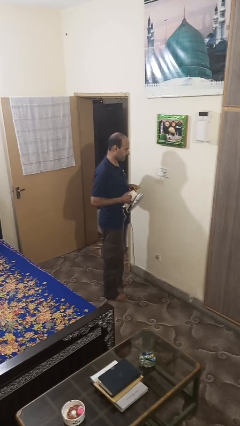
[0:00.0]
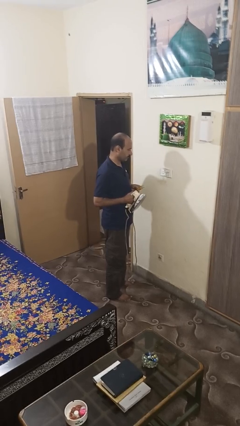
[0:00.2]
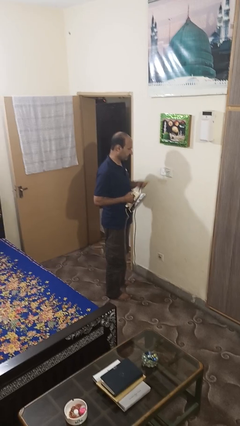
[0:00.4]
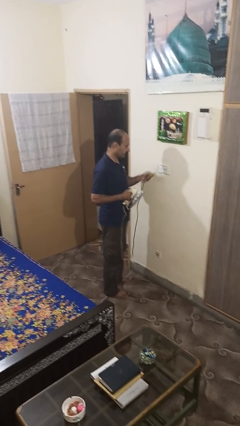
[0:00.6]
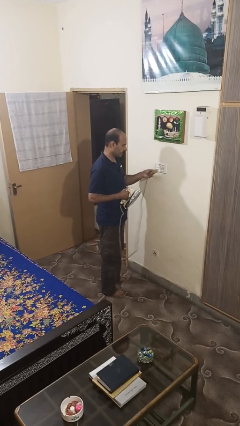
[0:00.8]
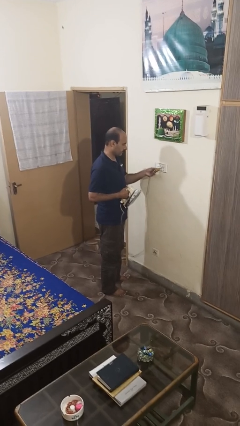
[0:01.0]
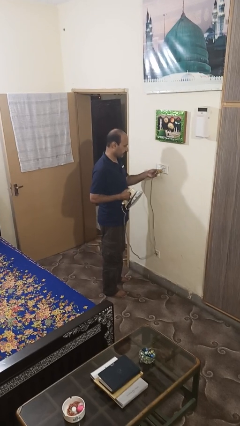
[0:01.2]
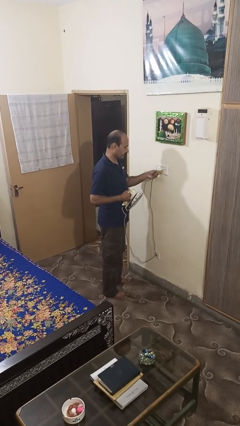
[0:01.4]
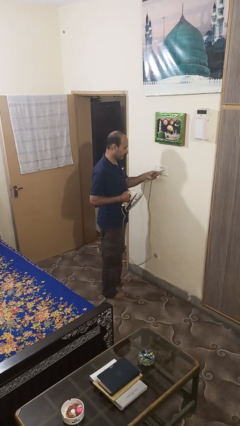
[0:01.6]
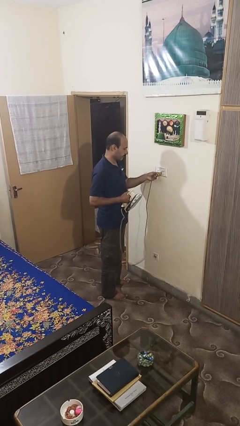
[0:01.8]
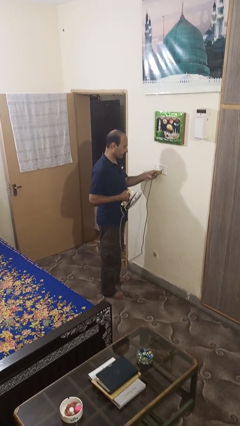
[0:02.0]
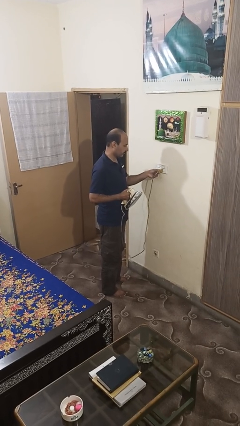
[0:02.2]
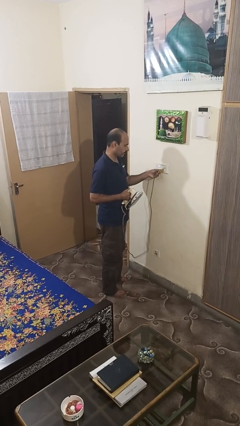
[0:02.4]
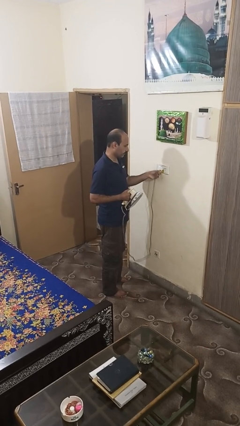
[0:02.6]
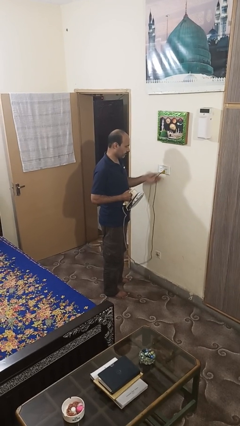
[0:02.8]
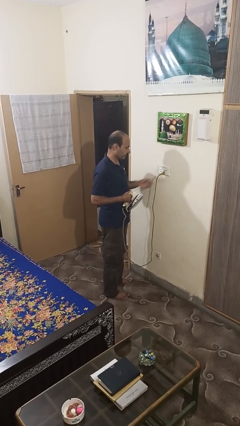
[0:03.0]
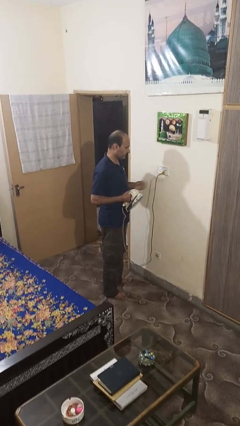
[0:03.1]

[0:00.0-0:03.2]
person plugs into electrical socket

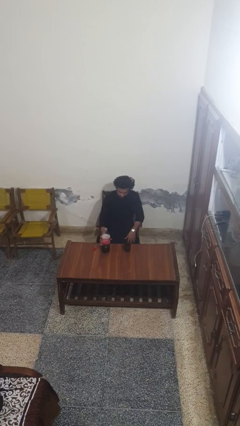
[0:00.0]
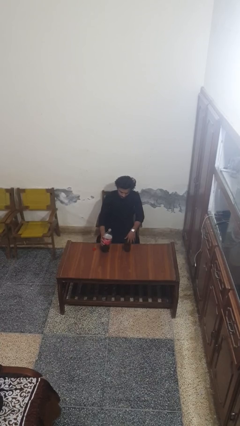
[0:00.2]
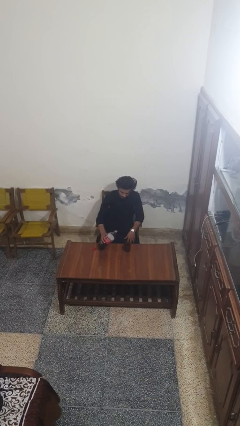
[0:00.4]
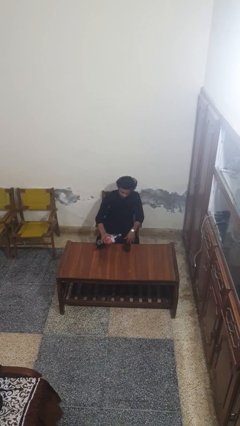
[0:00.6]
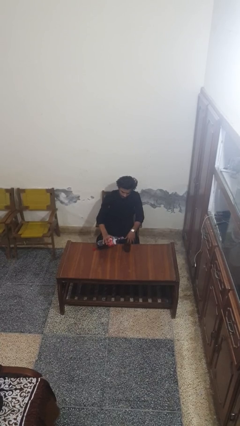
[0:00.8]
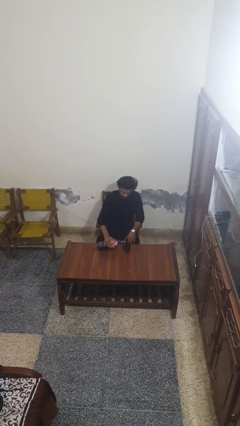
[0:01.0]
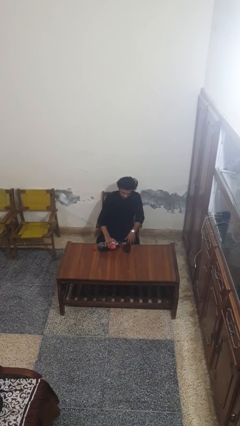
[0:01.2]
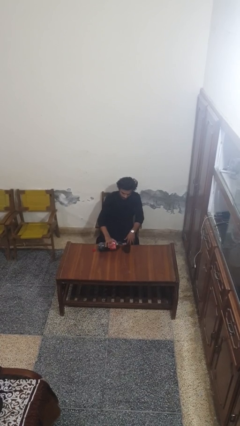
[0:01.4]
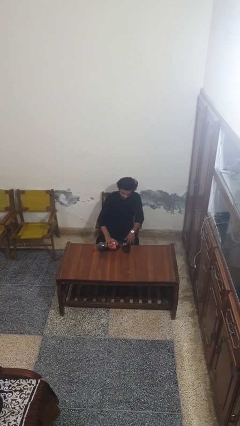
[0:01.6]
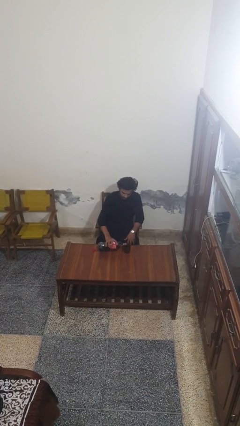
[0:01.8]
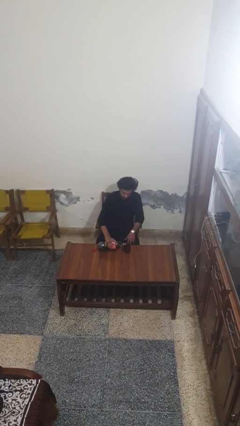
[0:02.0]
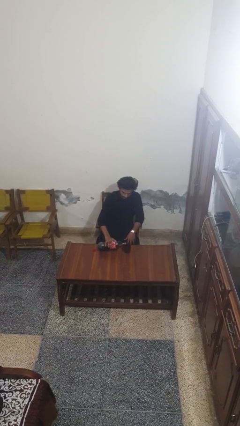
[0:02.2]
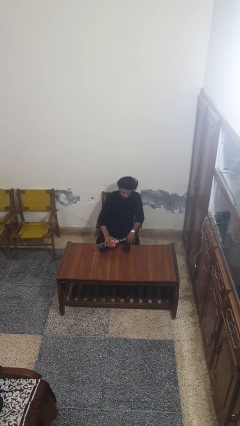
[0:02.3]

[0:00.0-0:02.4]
person pours liquid into cup

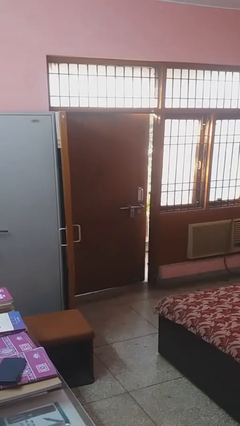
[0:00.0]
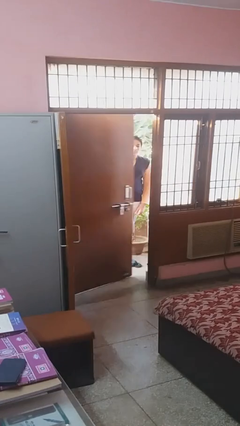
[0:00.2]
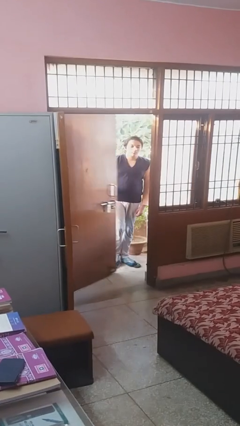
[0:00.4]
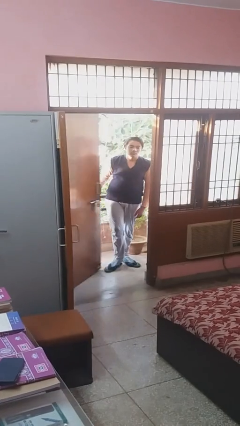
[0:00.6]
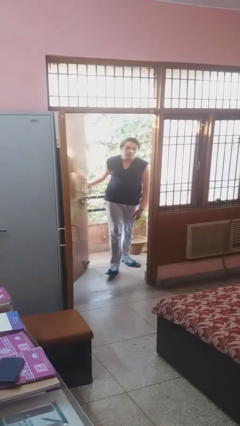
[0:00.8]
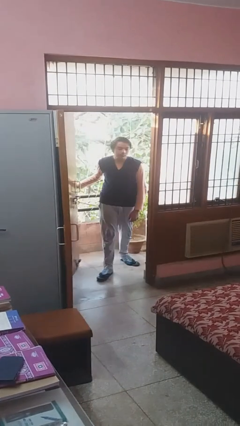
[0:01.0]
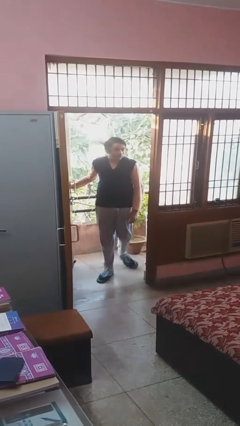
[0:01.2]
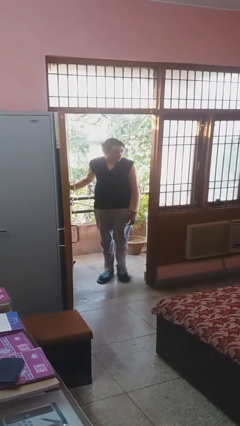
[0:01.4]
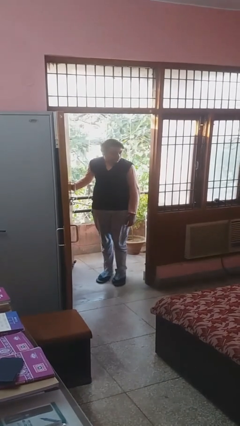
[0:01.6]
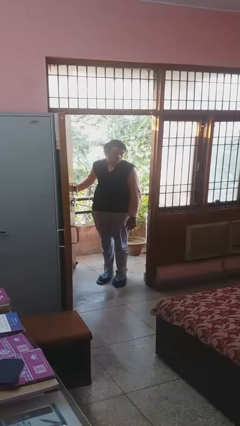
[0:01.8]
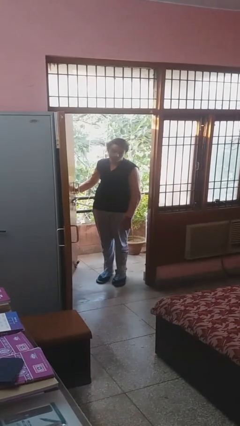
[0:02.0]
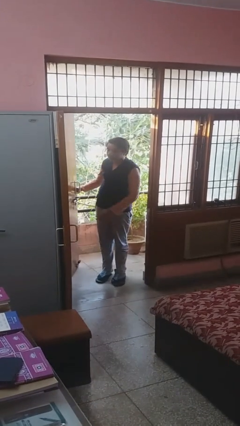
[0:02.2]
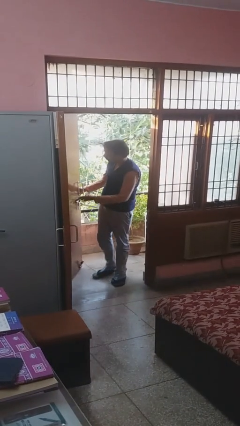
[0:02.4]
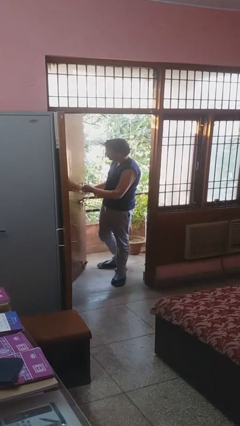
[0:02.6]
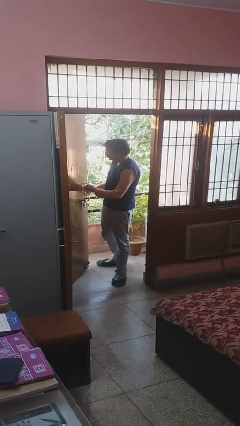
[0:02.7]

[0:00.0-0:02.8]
person opens facility door

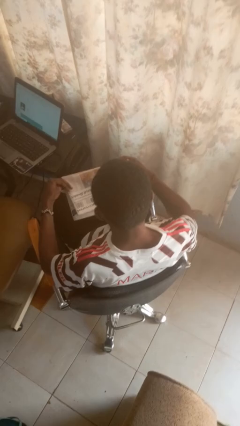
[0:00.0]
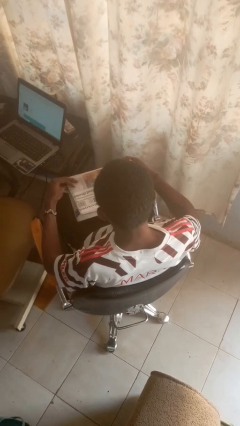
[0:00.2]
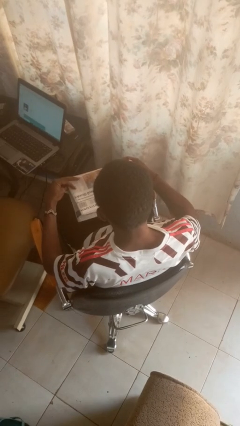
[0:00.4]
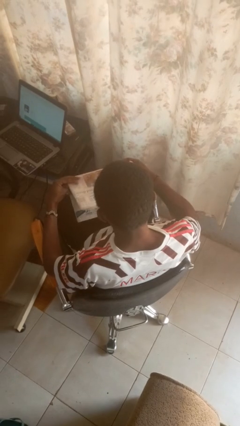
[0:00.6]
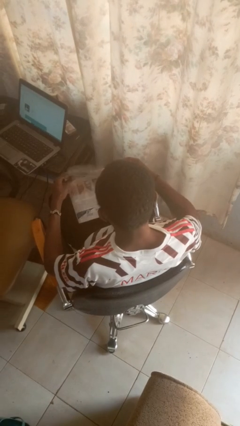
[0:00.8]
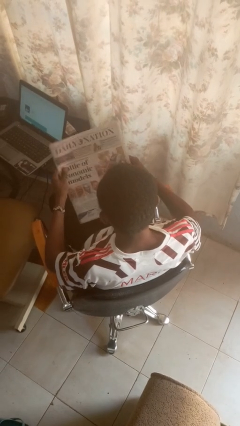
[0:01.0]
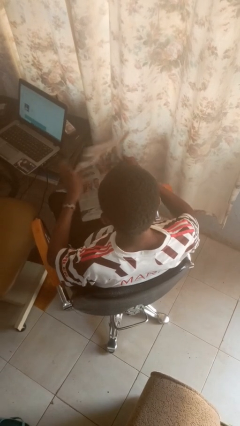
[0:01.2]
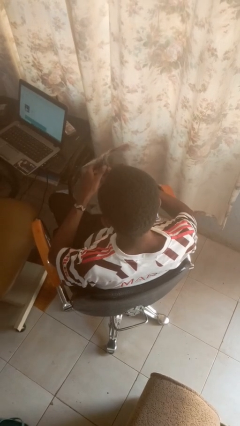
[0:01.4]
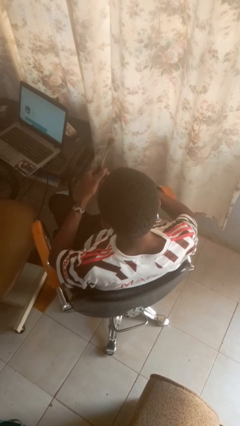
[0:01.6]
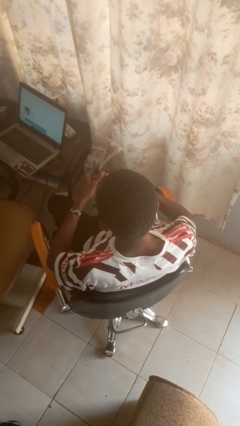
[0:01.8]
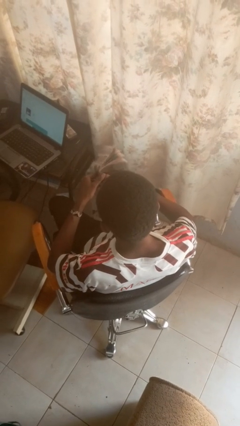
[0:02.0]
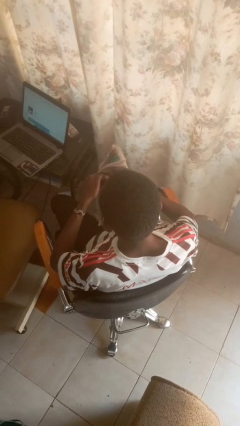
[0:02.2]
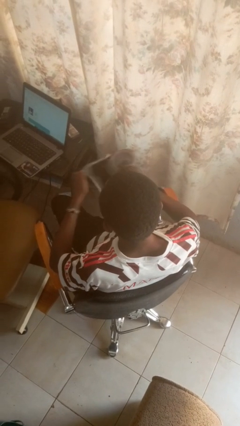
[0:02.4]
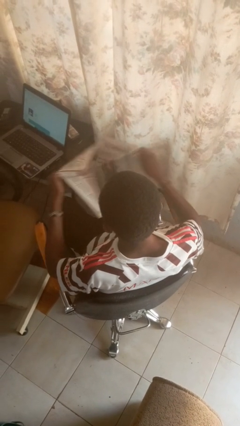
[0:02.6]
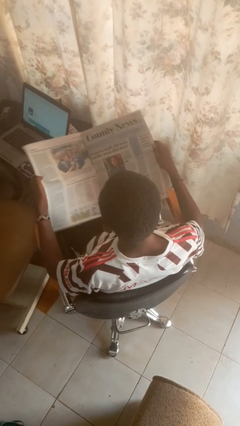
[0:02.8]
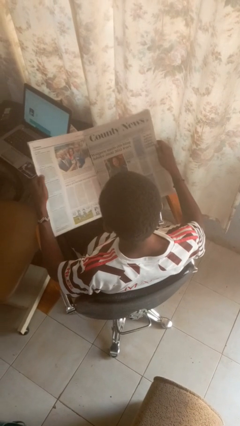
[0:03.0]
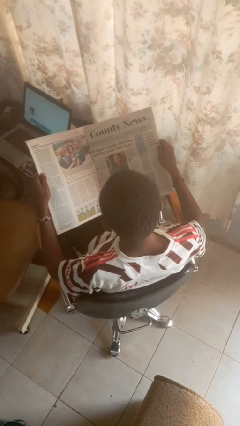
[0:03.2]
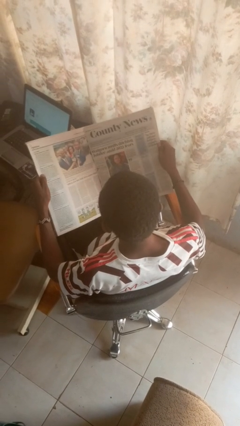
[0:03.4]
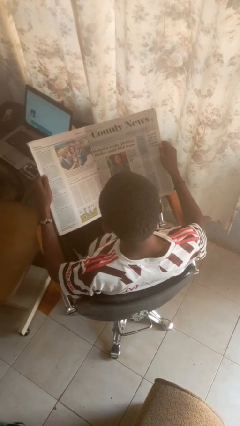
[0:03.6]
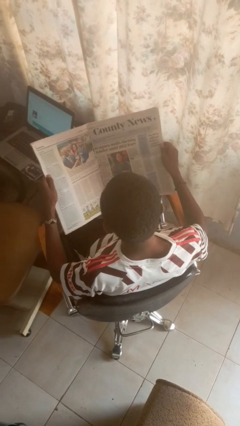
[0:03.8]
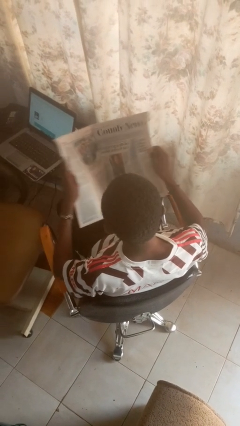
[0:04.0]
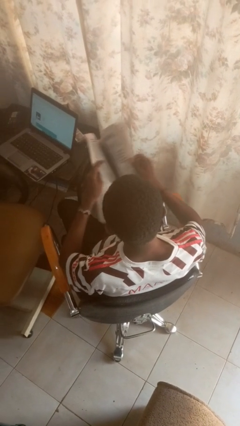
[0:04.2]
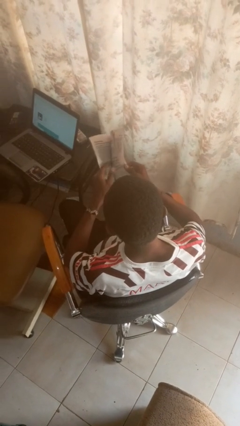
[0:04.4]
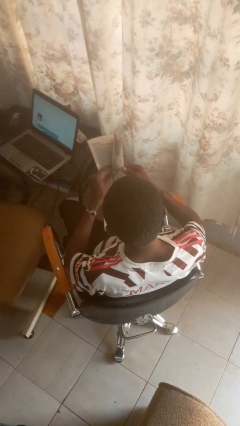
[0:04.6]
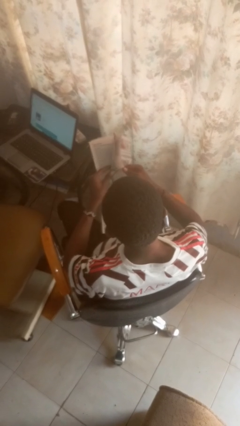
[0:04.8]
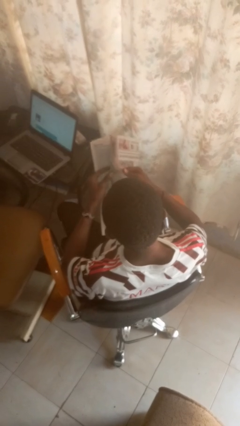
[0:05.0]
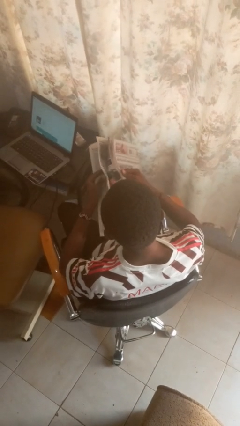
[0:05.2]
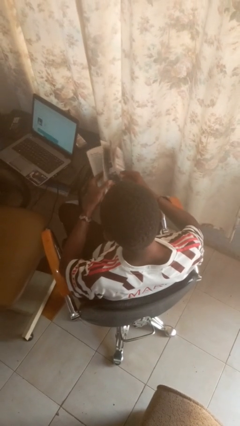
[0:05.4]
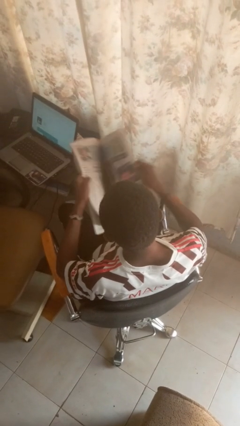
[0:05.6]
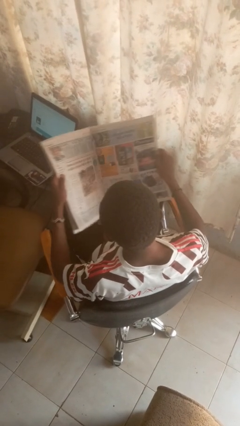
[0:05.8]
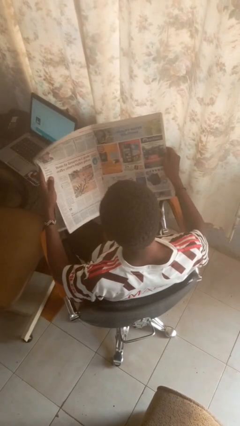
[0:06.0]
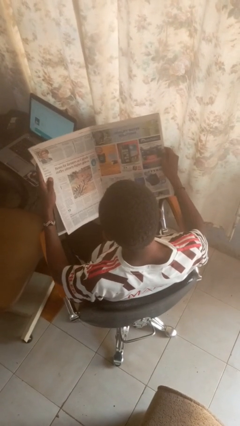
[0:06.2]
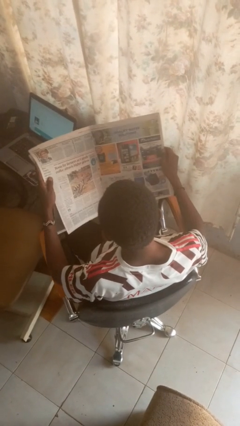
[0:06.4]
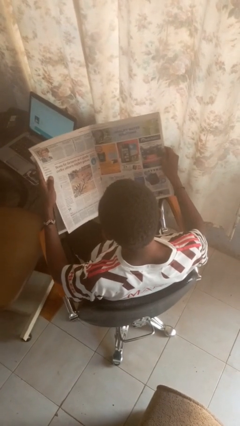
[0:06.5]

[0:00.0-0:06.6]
person reads newspaper

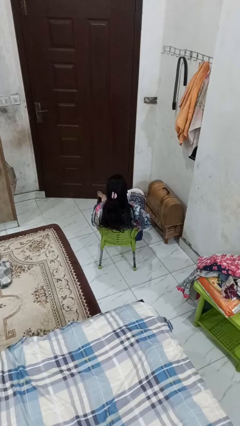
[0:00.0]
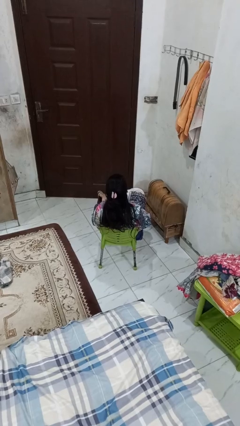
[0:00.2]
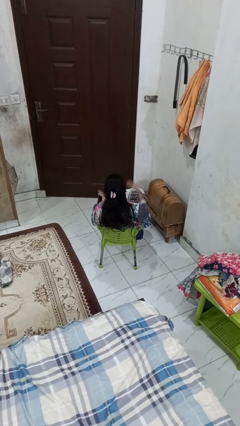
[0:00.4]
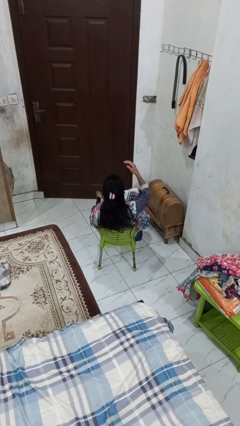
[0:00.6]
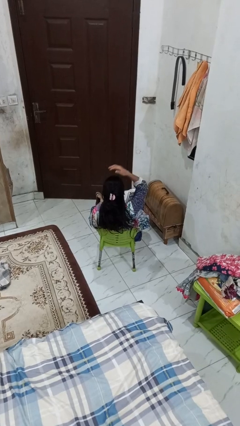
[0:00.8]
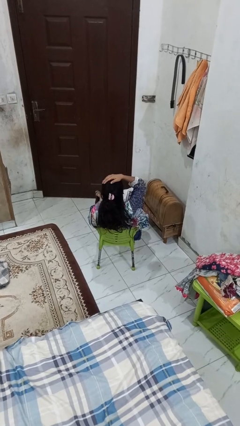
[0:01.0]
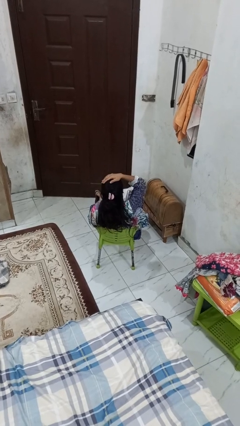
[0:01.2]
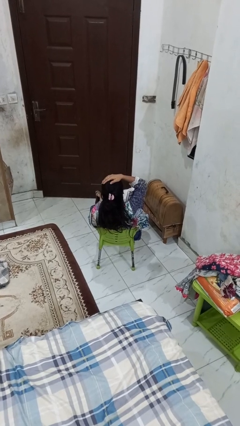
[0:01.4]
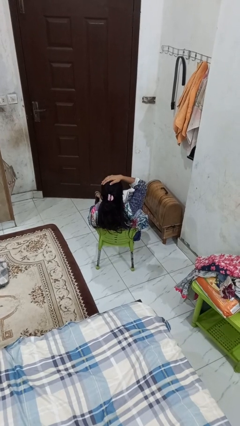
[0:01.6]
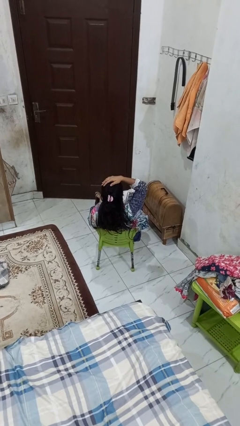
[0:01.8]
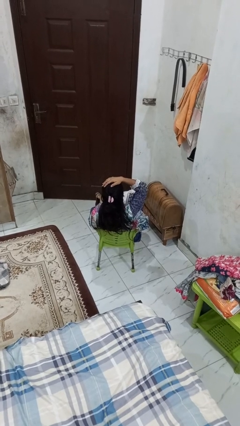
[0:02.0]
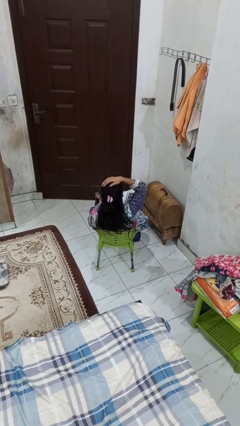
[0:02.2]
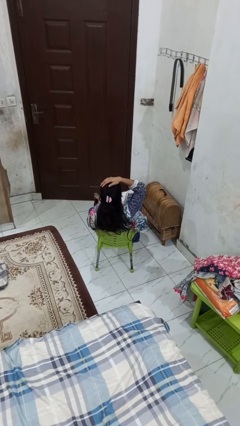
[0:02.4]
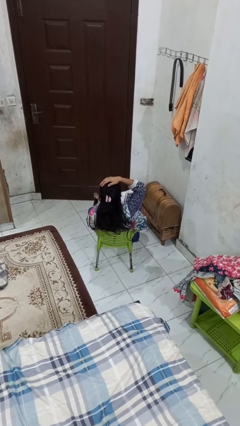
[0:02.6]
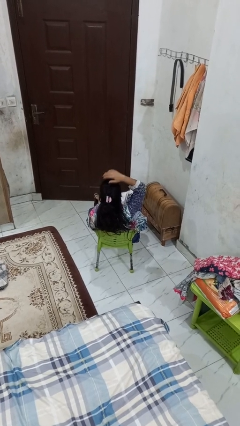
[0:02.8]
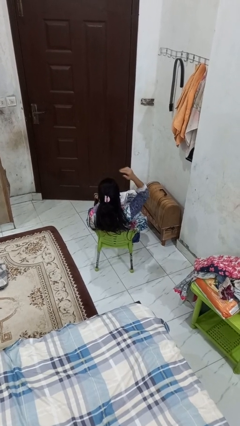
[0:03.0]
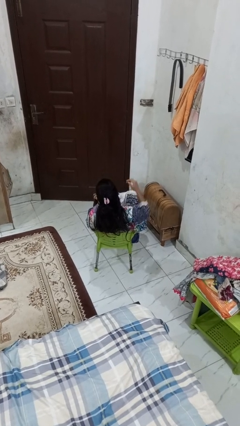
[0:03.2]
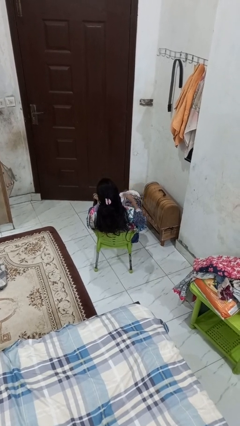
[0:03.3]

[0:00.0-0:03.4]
person pats head
